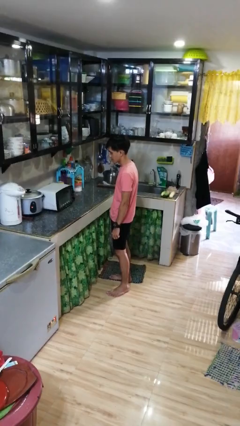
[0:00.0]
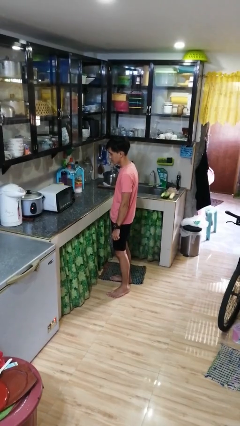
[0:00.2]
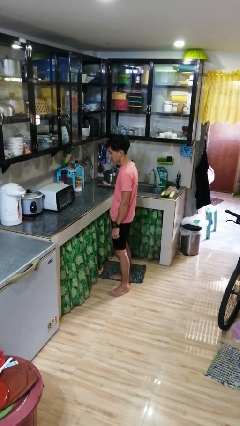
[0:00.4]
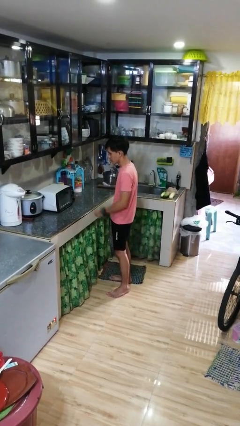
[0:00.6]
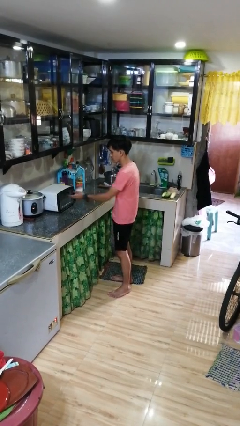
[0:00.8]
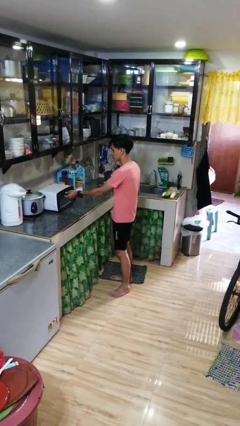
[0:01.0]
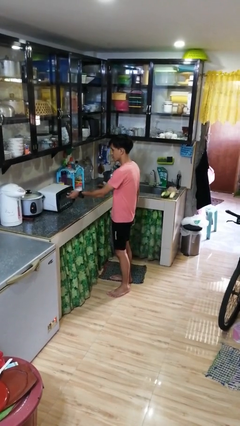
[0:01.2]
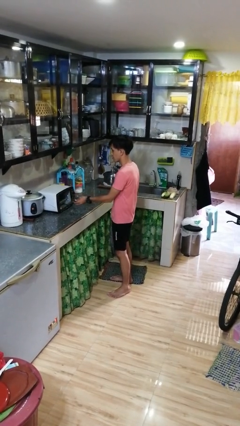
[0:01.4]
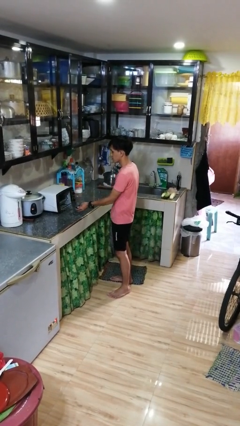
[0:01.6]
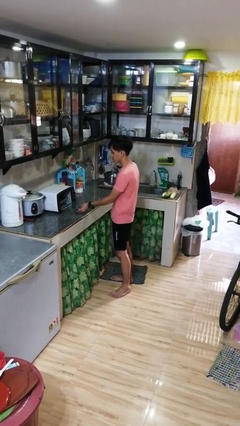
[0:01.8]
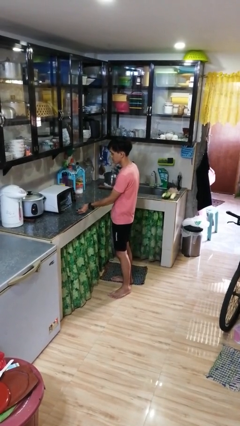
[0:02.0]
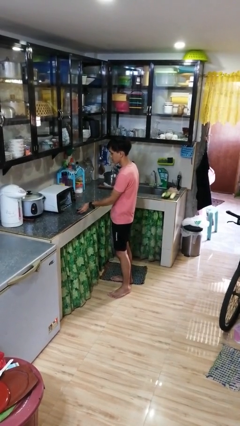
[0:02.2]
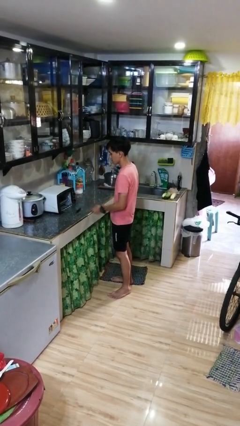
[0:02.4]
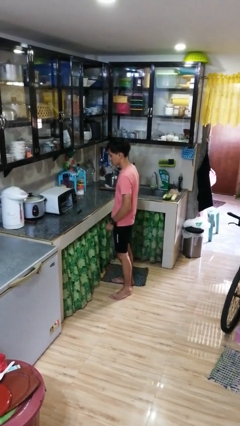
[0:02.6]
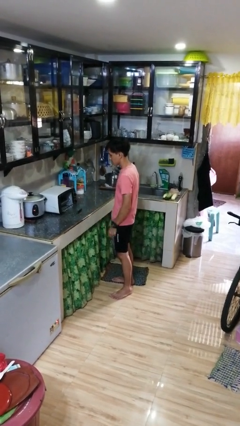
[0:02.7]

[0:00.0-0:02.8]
person opens microwave

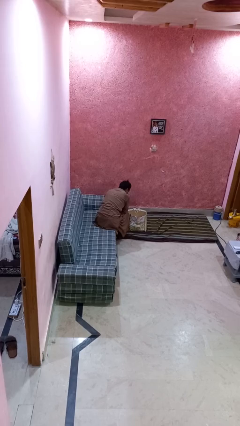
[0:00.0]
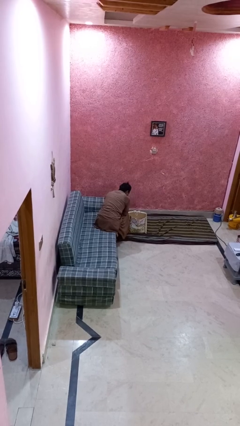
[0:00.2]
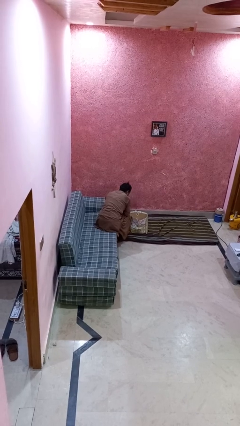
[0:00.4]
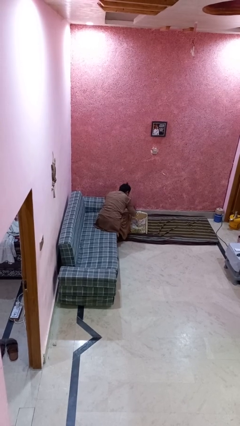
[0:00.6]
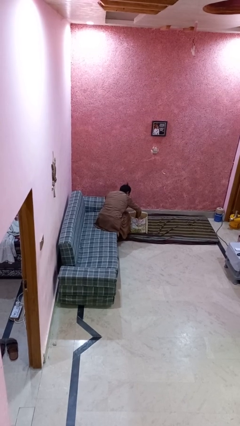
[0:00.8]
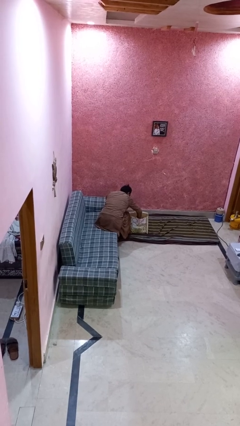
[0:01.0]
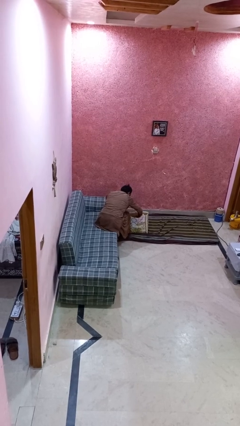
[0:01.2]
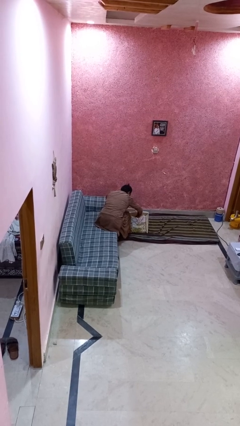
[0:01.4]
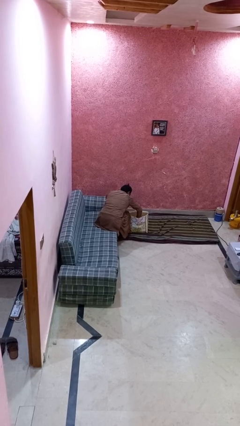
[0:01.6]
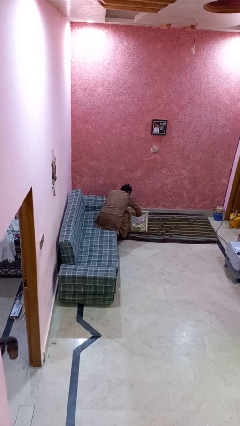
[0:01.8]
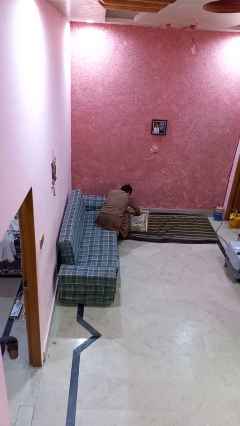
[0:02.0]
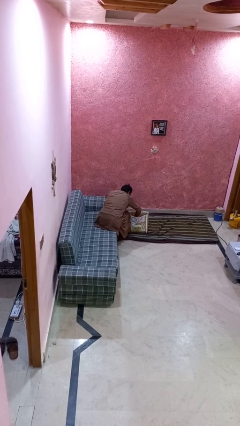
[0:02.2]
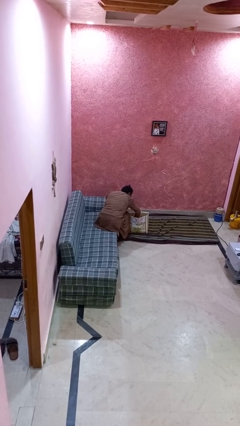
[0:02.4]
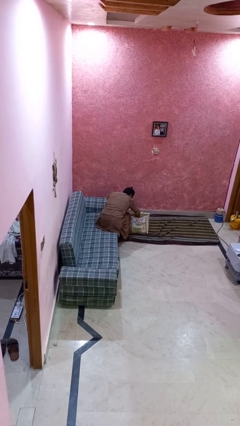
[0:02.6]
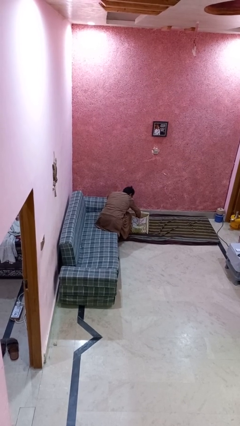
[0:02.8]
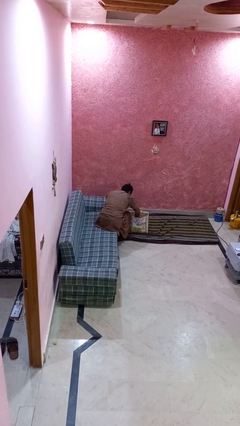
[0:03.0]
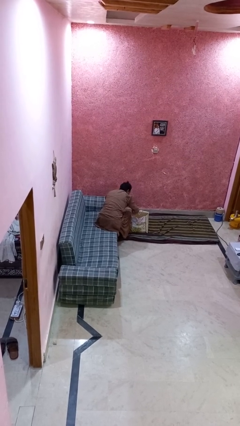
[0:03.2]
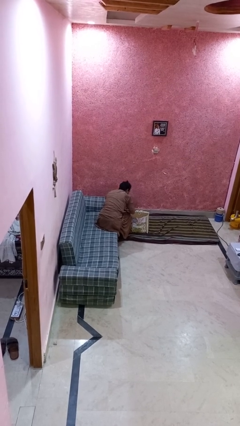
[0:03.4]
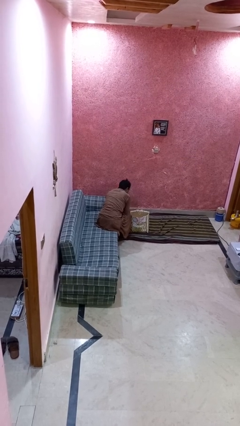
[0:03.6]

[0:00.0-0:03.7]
person searches in bag

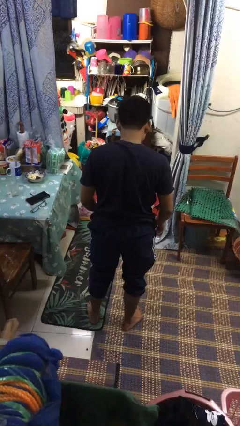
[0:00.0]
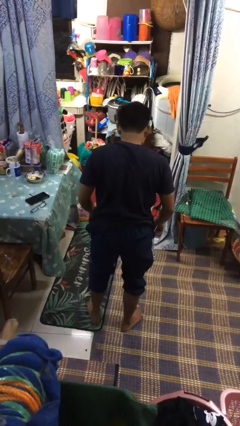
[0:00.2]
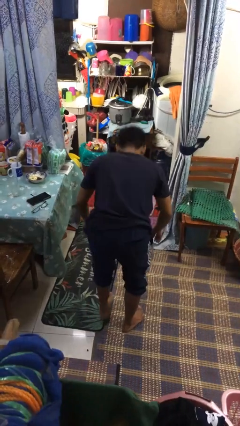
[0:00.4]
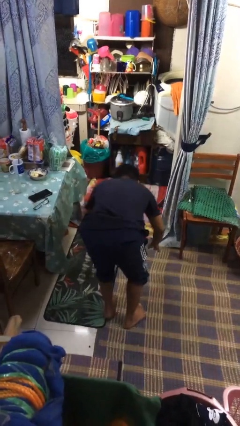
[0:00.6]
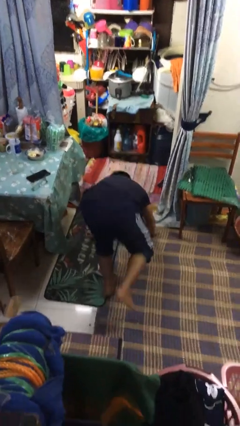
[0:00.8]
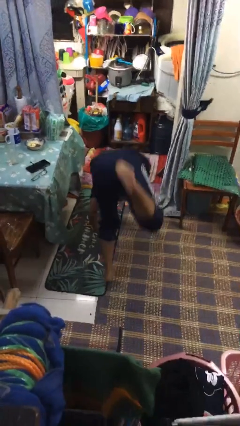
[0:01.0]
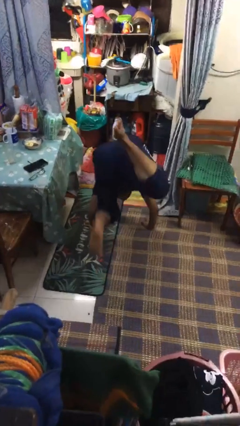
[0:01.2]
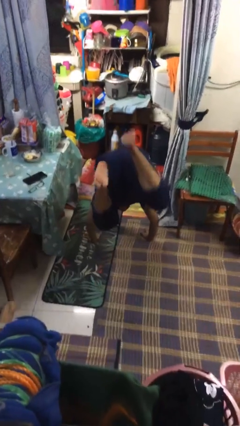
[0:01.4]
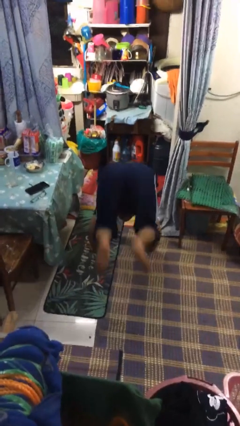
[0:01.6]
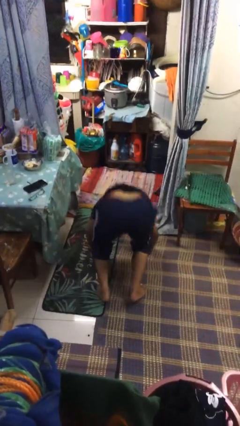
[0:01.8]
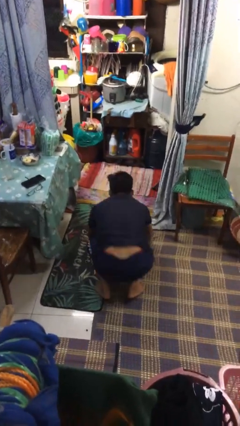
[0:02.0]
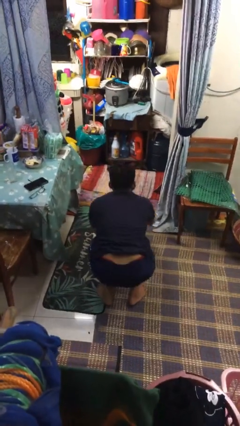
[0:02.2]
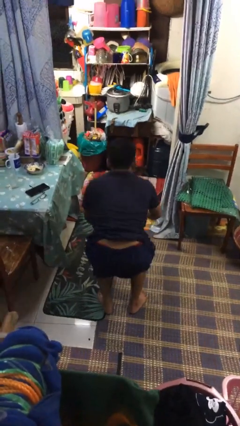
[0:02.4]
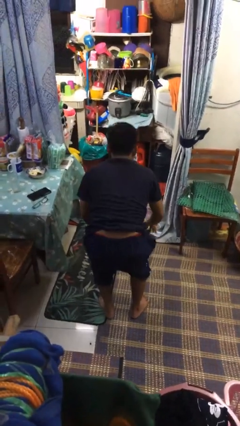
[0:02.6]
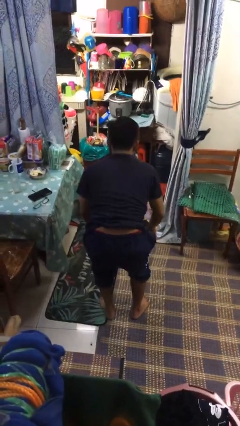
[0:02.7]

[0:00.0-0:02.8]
person handstand

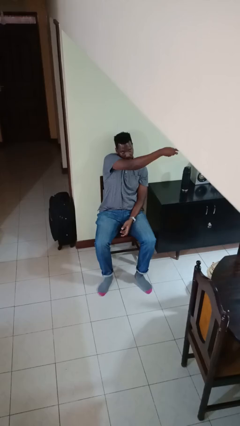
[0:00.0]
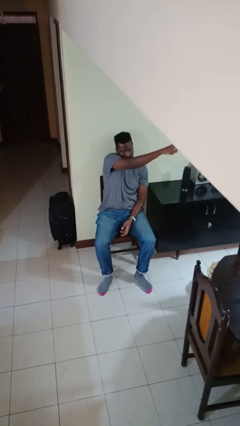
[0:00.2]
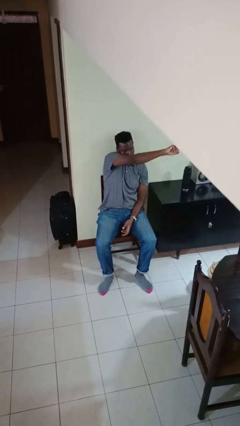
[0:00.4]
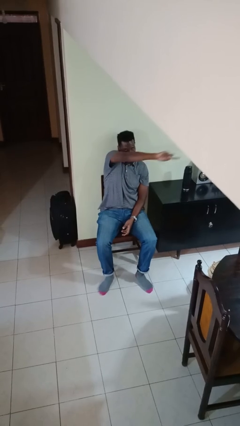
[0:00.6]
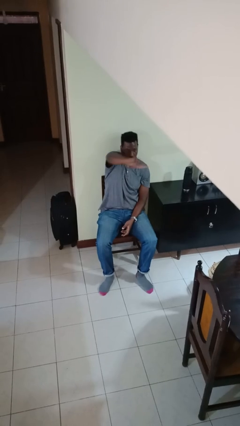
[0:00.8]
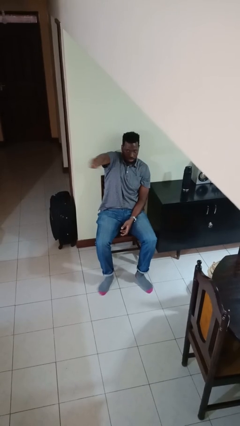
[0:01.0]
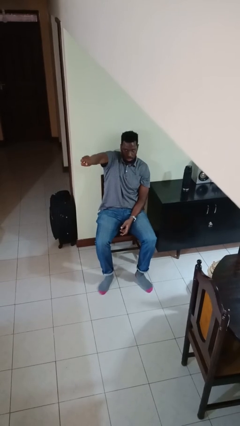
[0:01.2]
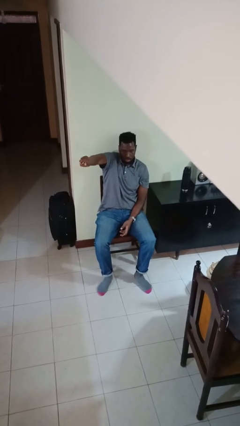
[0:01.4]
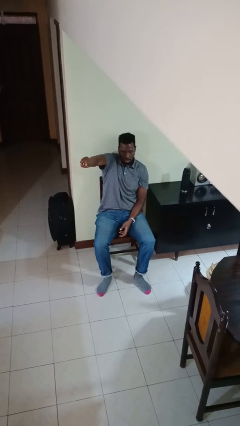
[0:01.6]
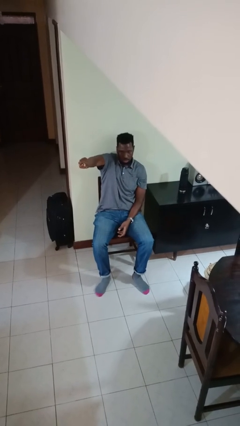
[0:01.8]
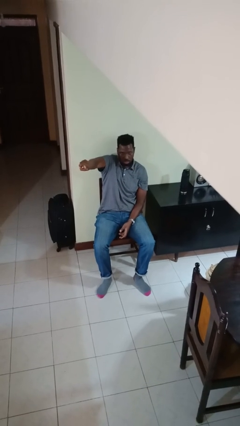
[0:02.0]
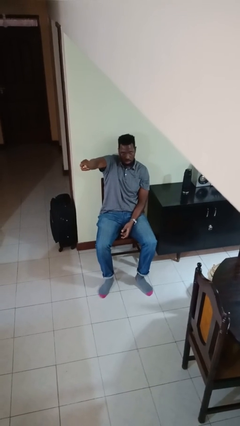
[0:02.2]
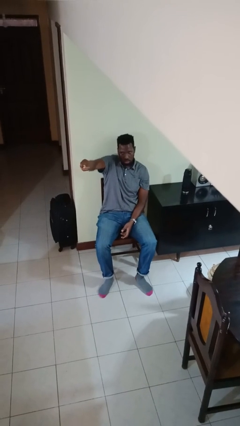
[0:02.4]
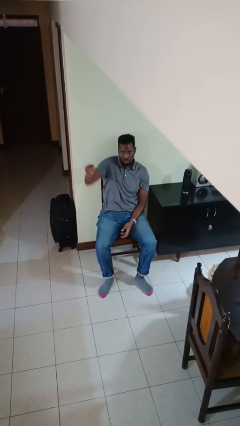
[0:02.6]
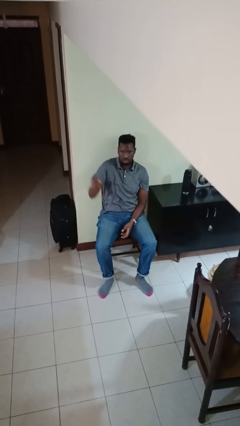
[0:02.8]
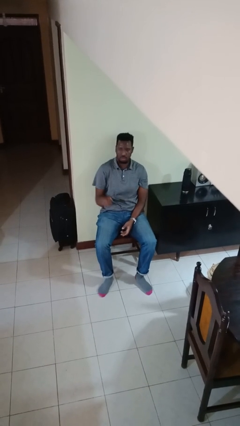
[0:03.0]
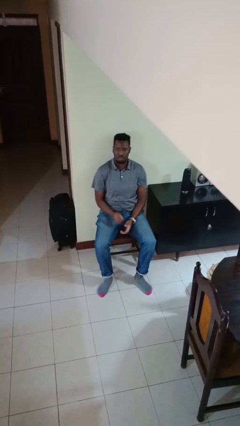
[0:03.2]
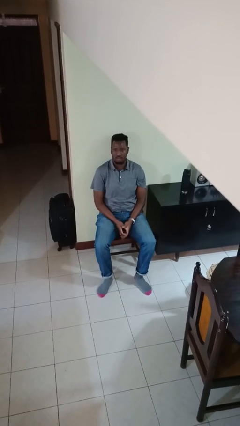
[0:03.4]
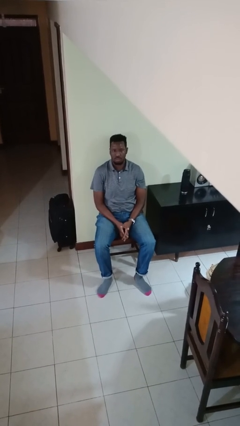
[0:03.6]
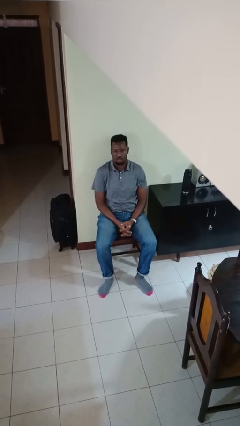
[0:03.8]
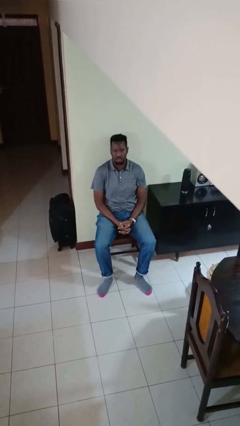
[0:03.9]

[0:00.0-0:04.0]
person gestures swipe right

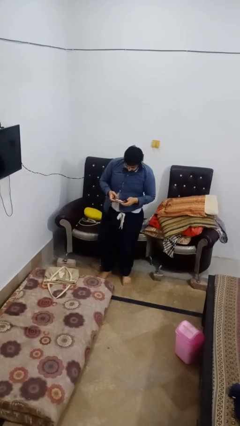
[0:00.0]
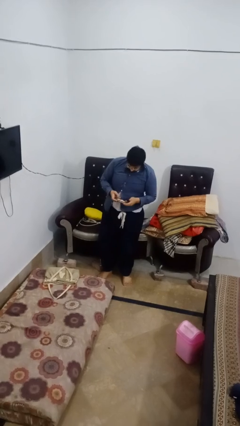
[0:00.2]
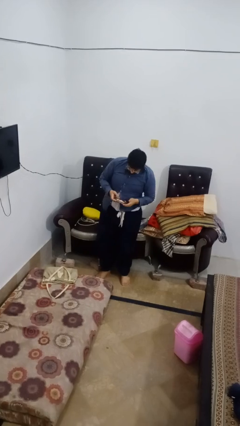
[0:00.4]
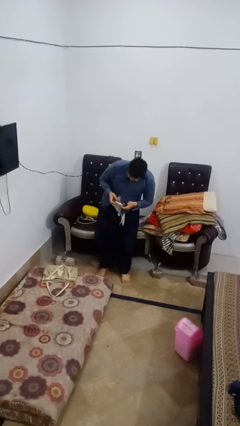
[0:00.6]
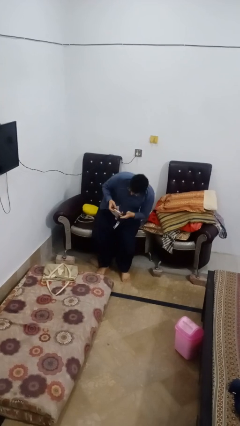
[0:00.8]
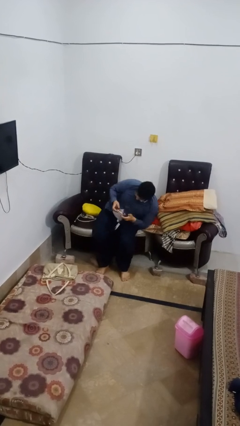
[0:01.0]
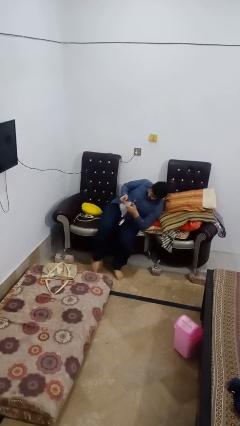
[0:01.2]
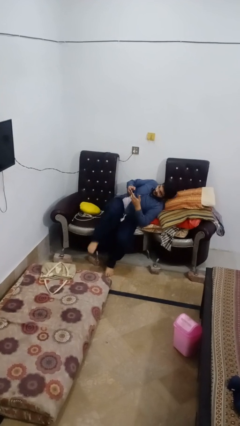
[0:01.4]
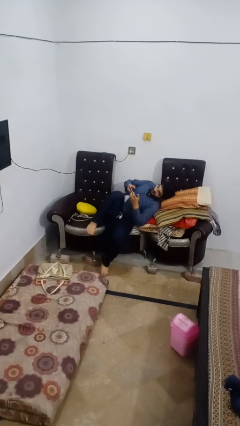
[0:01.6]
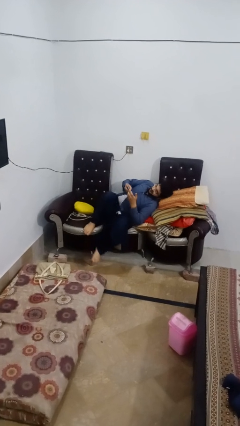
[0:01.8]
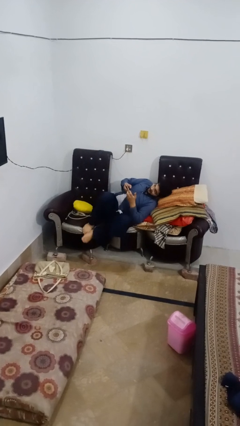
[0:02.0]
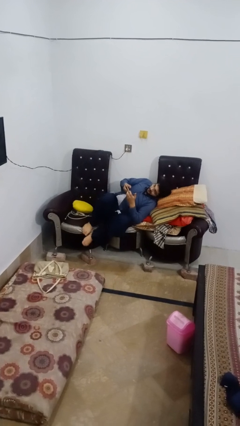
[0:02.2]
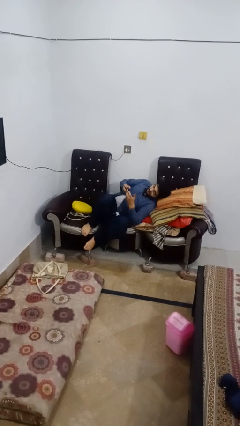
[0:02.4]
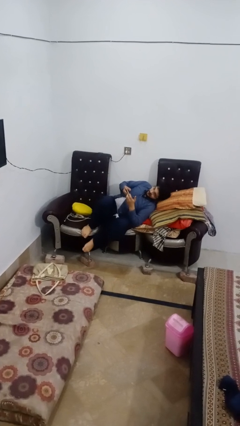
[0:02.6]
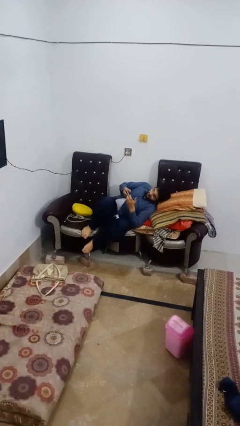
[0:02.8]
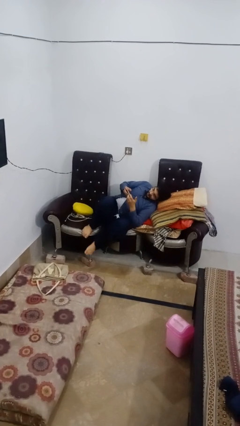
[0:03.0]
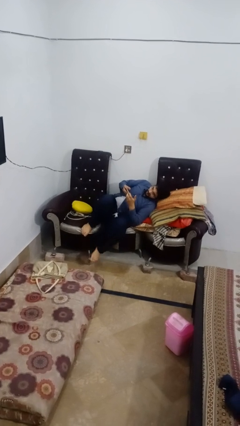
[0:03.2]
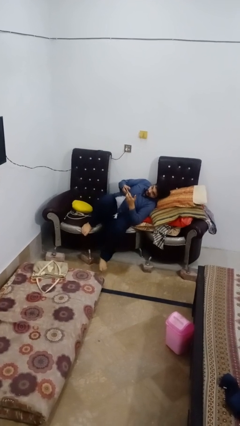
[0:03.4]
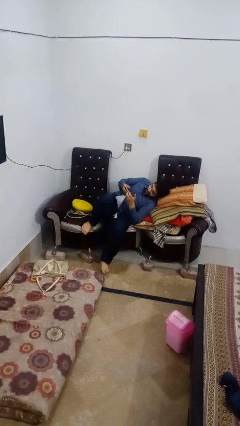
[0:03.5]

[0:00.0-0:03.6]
person lies down on couch

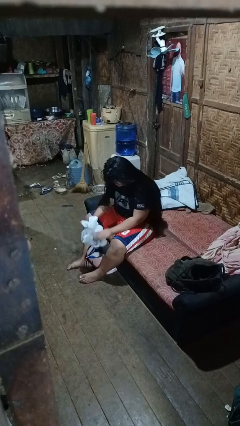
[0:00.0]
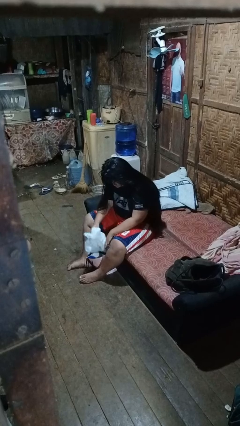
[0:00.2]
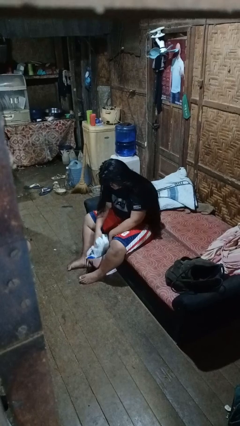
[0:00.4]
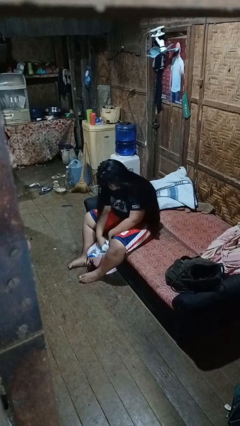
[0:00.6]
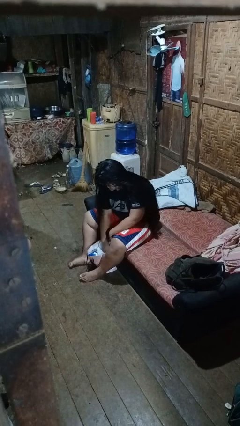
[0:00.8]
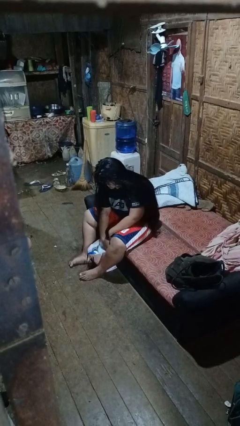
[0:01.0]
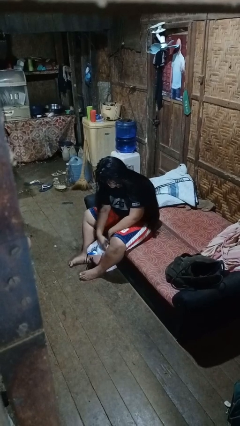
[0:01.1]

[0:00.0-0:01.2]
person puts object into bag
